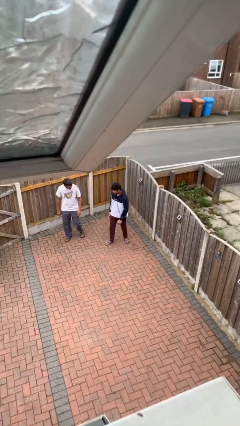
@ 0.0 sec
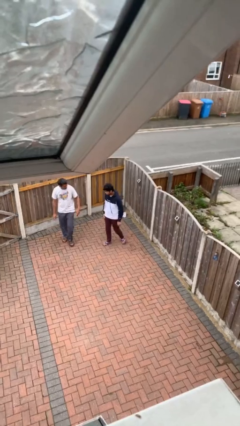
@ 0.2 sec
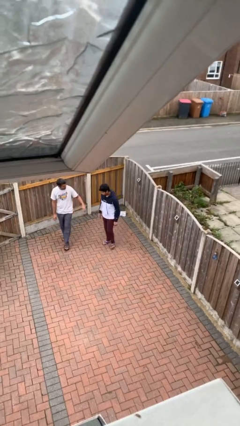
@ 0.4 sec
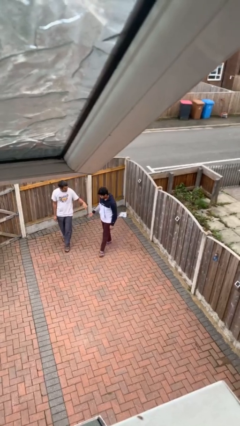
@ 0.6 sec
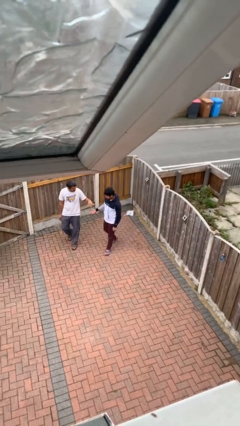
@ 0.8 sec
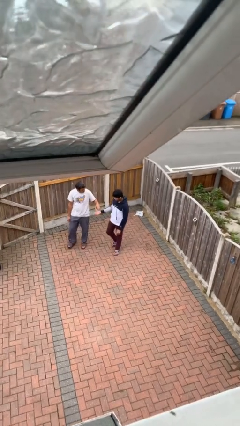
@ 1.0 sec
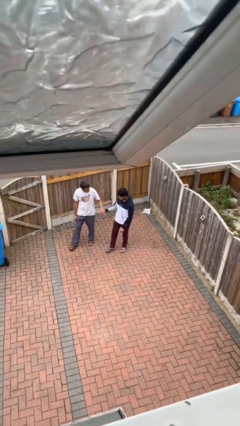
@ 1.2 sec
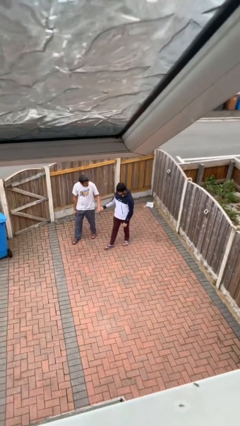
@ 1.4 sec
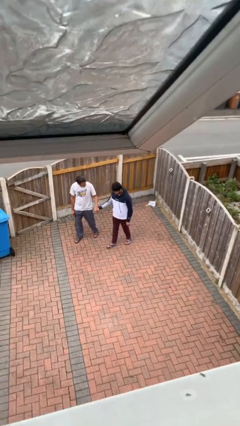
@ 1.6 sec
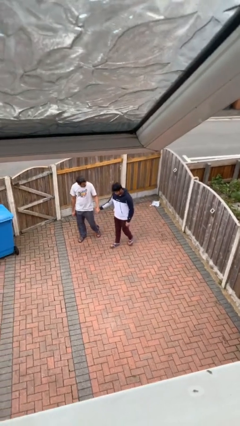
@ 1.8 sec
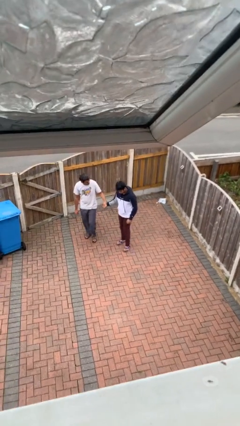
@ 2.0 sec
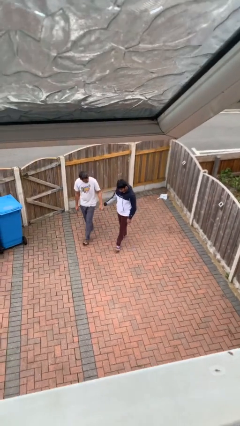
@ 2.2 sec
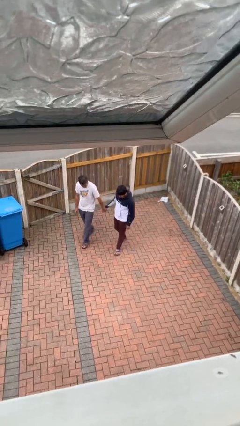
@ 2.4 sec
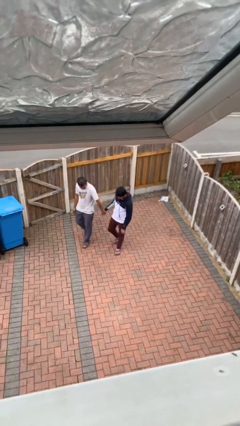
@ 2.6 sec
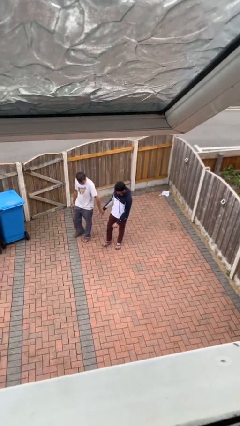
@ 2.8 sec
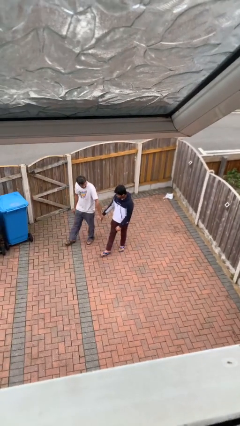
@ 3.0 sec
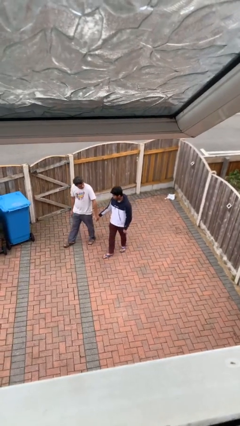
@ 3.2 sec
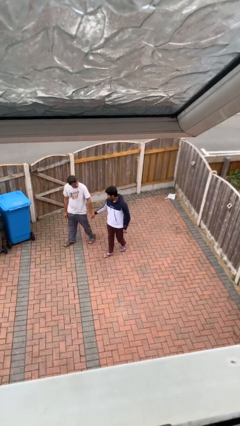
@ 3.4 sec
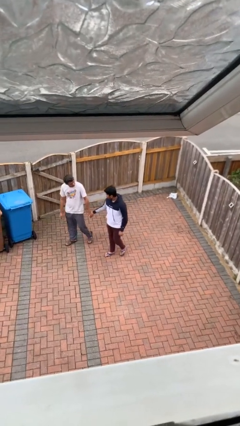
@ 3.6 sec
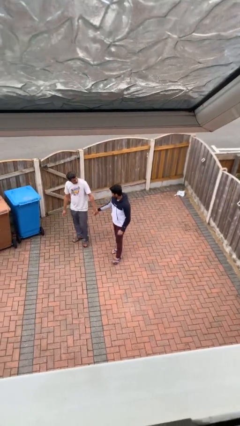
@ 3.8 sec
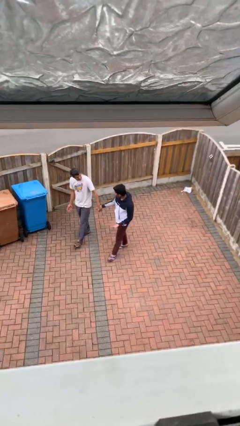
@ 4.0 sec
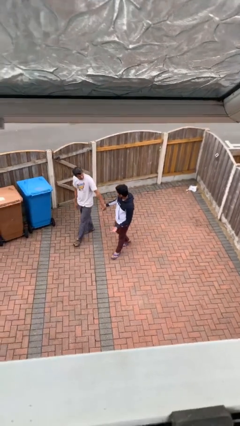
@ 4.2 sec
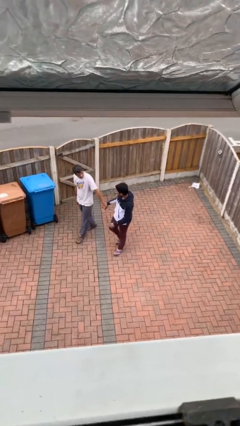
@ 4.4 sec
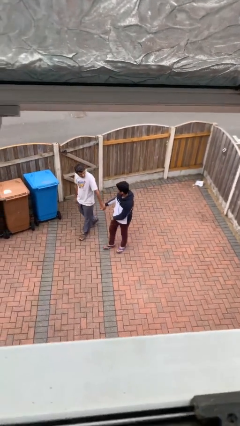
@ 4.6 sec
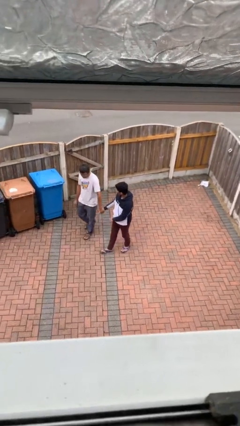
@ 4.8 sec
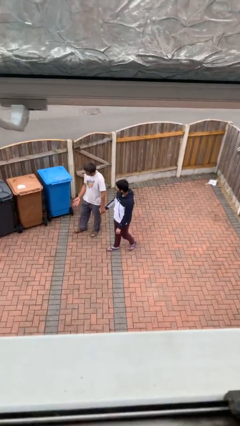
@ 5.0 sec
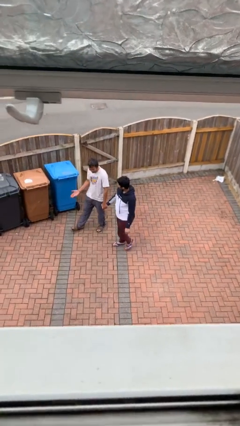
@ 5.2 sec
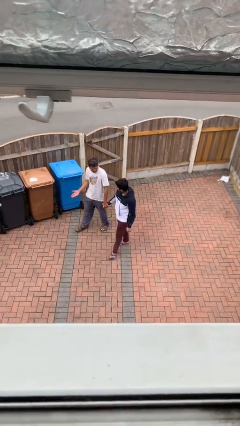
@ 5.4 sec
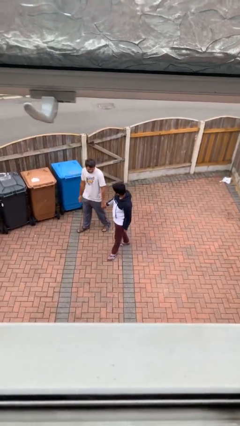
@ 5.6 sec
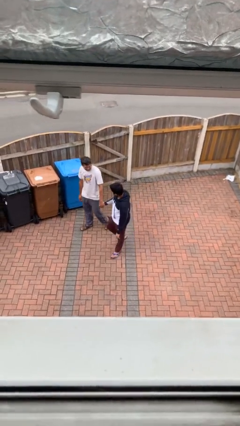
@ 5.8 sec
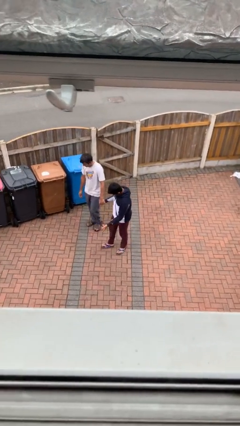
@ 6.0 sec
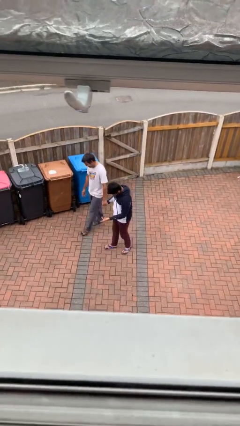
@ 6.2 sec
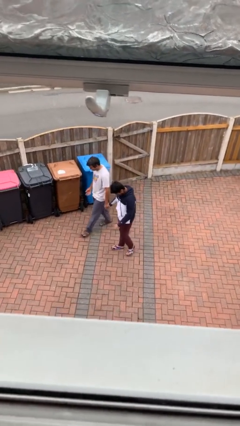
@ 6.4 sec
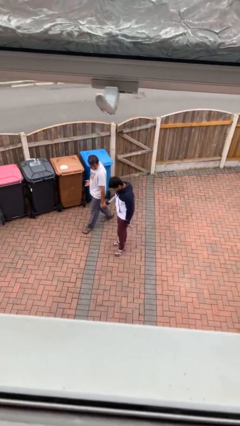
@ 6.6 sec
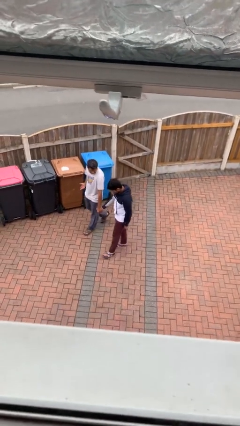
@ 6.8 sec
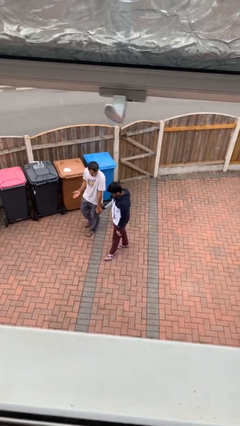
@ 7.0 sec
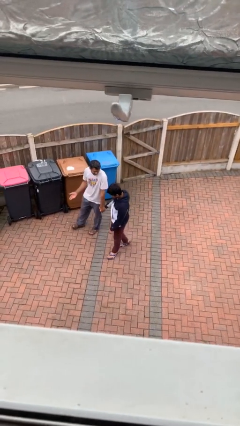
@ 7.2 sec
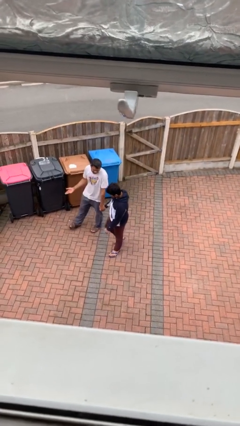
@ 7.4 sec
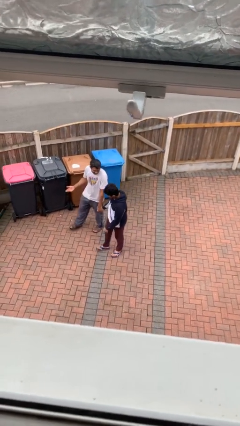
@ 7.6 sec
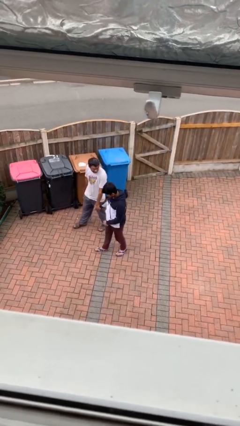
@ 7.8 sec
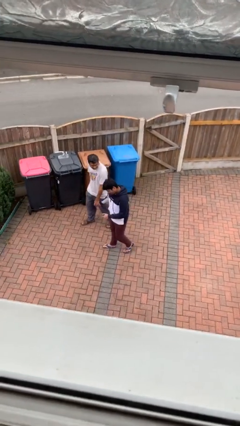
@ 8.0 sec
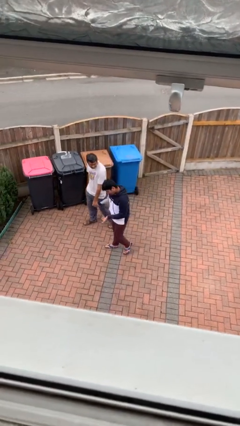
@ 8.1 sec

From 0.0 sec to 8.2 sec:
person holds hand

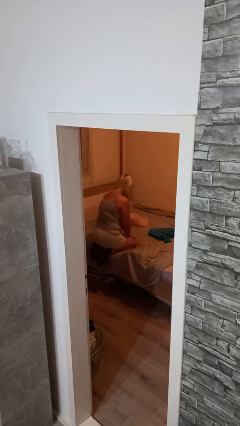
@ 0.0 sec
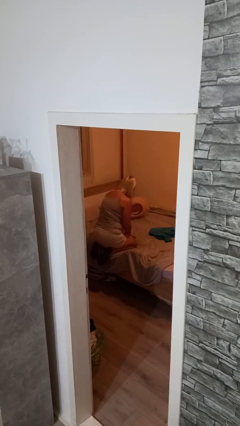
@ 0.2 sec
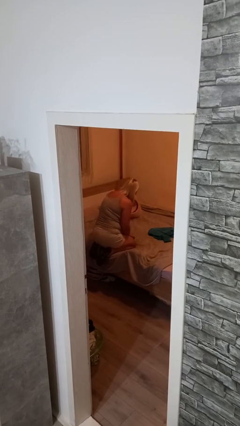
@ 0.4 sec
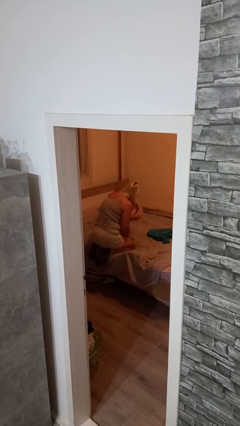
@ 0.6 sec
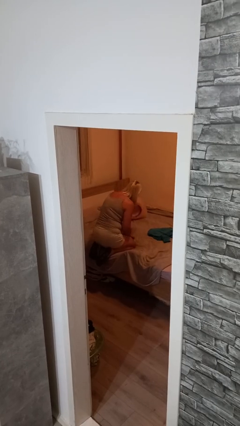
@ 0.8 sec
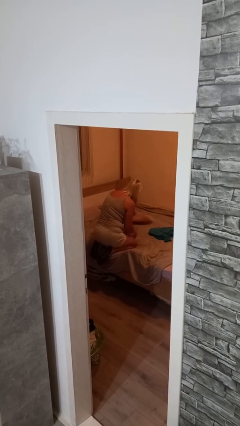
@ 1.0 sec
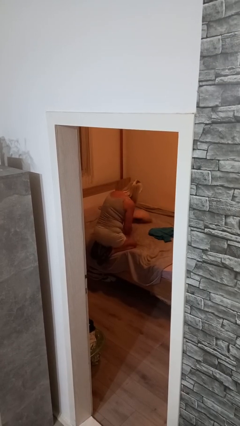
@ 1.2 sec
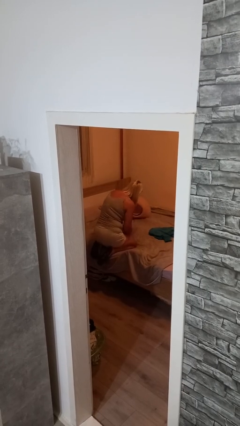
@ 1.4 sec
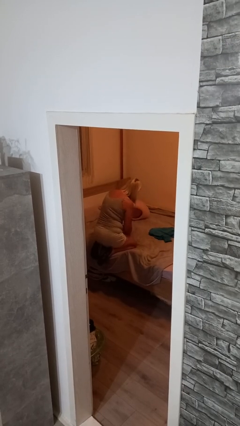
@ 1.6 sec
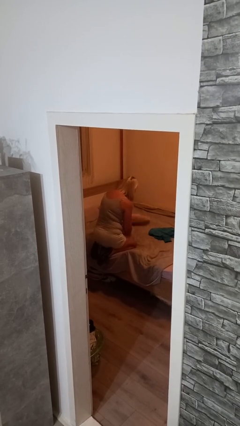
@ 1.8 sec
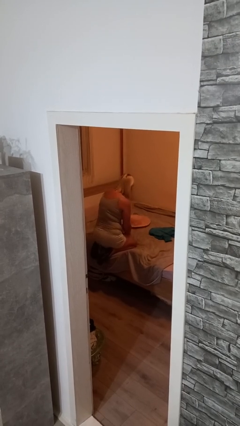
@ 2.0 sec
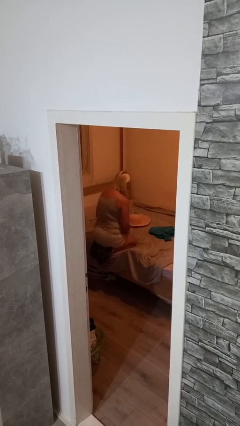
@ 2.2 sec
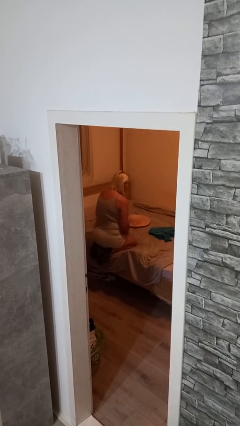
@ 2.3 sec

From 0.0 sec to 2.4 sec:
person searches under bed

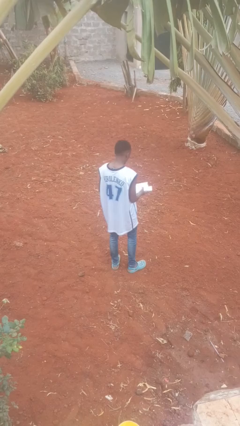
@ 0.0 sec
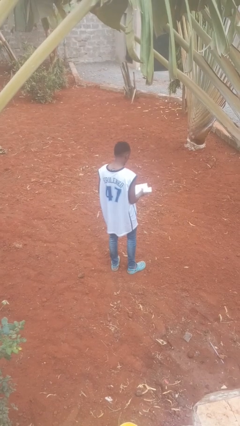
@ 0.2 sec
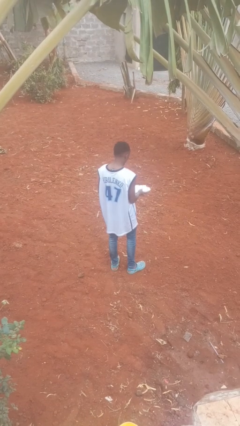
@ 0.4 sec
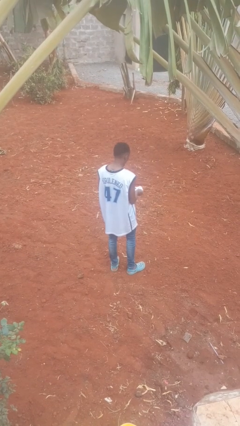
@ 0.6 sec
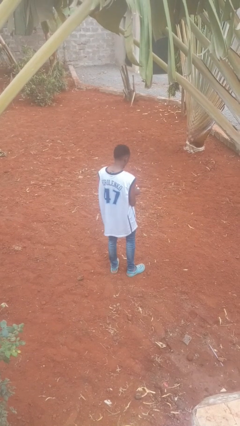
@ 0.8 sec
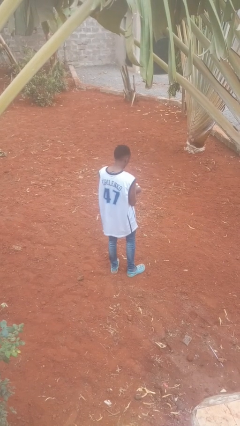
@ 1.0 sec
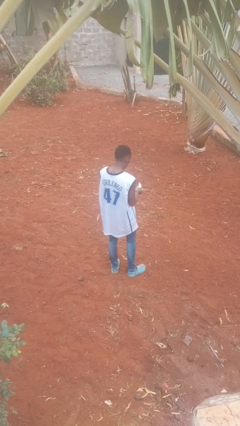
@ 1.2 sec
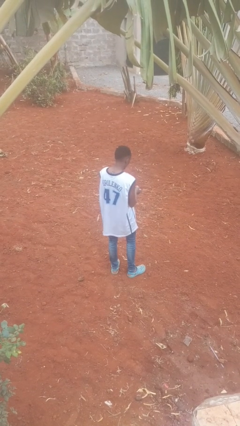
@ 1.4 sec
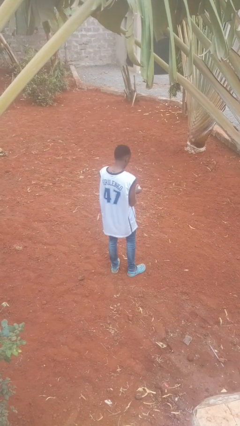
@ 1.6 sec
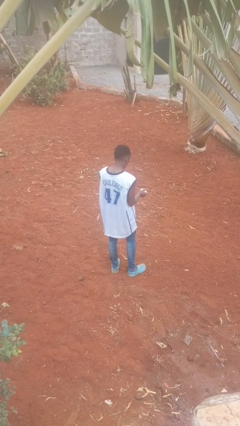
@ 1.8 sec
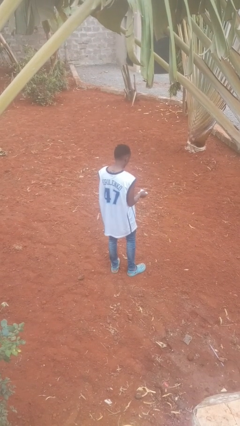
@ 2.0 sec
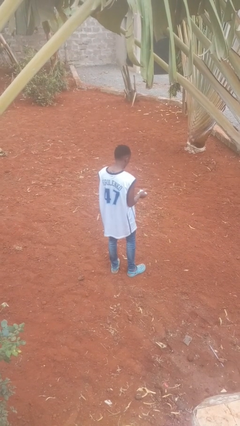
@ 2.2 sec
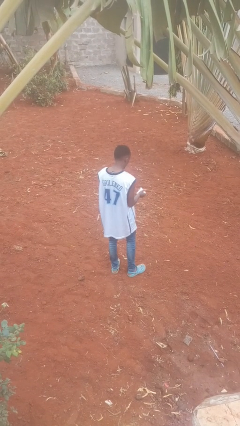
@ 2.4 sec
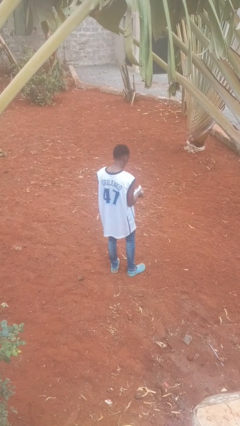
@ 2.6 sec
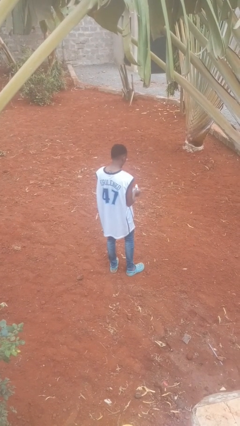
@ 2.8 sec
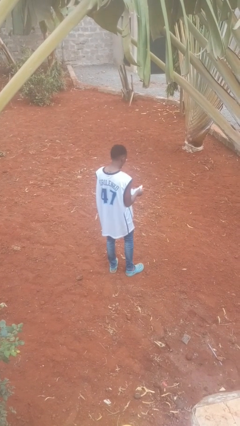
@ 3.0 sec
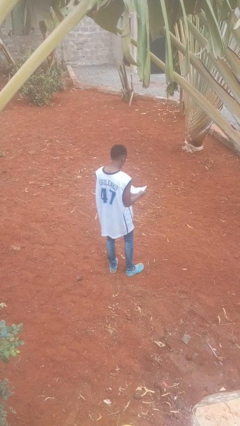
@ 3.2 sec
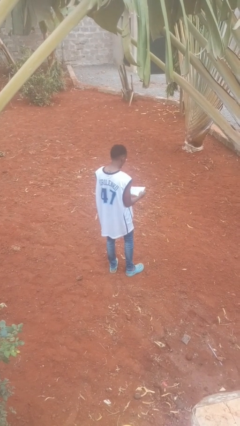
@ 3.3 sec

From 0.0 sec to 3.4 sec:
person crumples paper

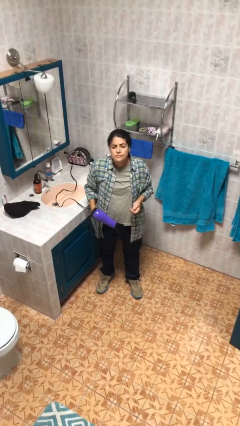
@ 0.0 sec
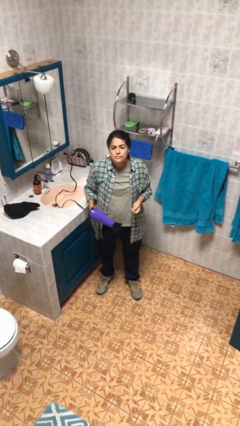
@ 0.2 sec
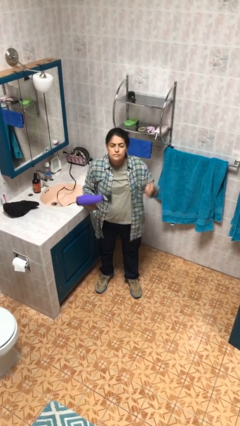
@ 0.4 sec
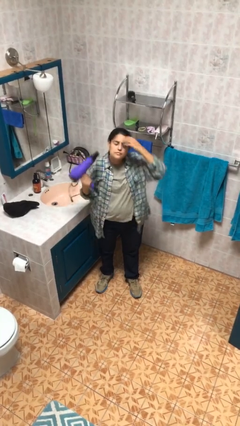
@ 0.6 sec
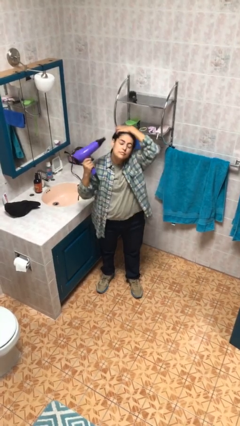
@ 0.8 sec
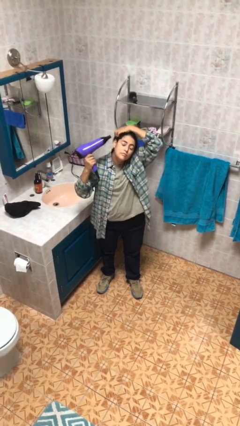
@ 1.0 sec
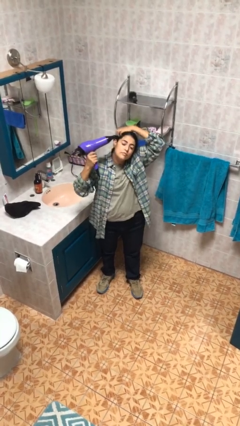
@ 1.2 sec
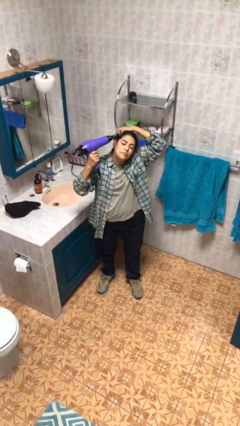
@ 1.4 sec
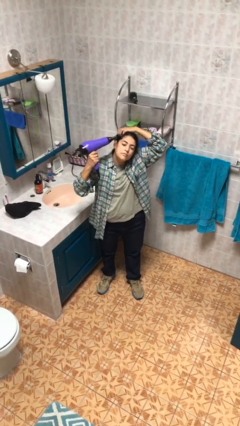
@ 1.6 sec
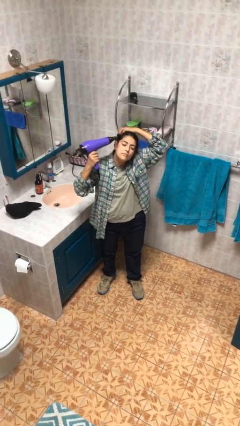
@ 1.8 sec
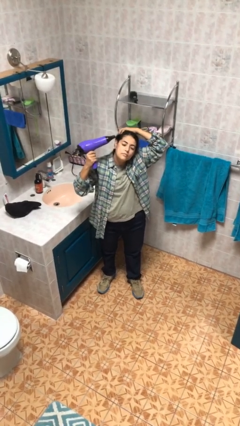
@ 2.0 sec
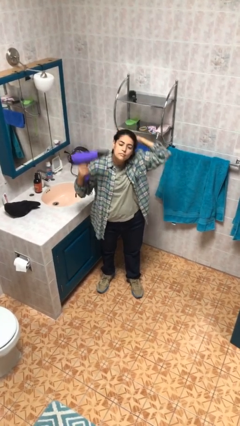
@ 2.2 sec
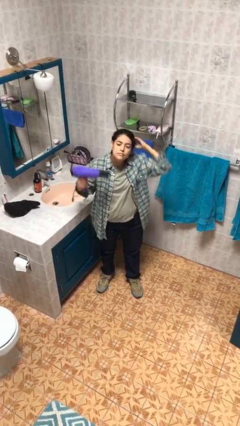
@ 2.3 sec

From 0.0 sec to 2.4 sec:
person dries hair with hairdryer

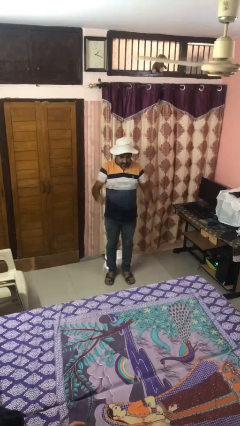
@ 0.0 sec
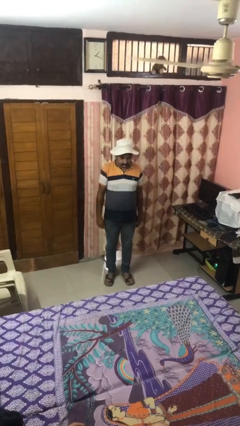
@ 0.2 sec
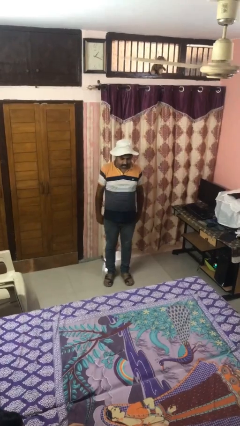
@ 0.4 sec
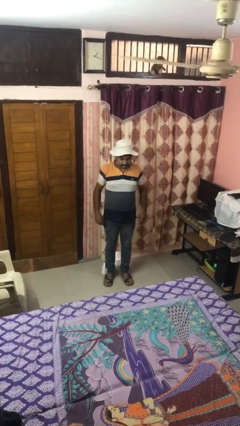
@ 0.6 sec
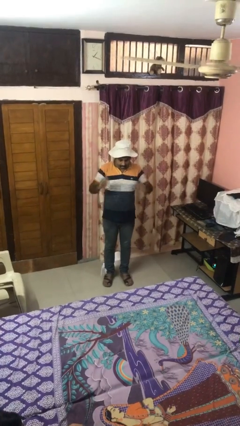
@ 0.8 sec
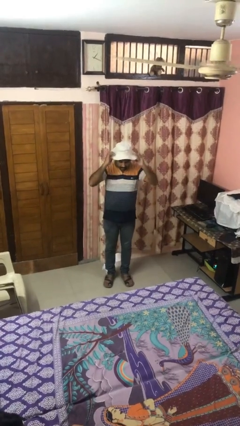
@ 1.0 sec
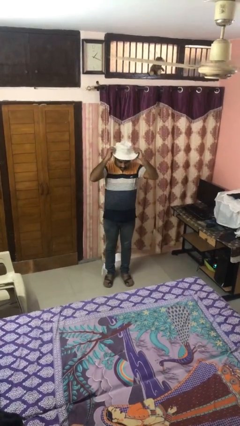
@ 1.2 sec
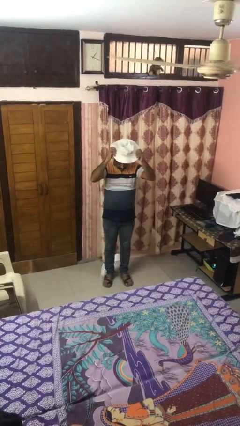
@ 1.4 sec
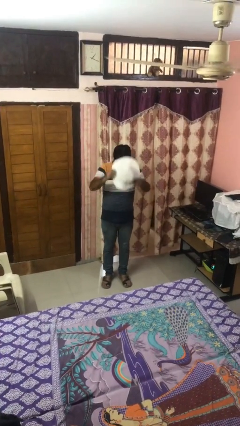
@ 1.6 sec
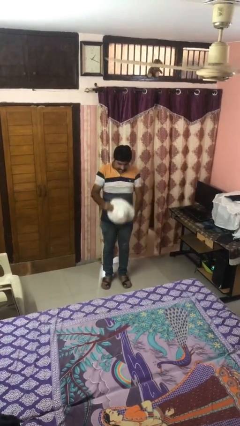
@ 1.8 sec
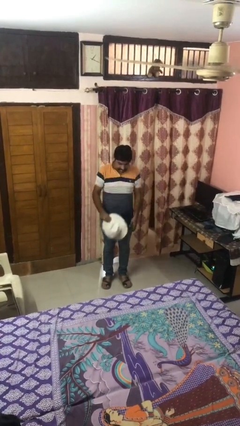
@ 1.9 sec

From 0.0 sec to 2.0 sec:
person takes off hat
